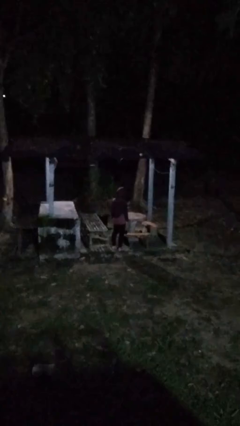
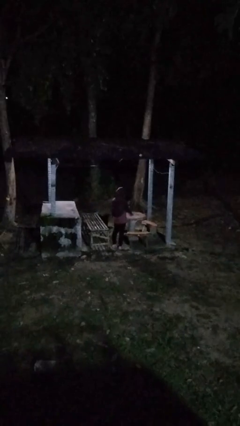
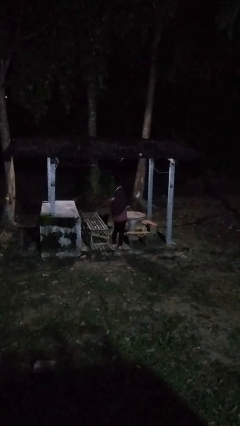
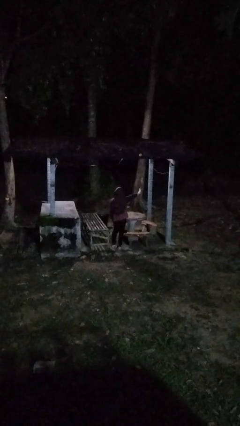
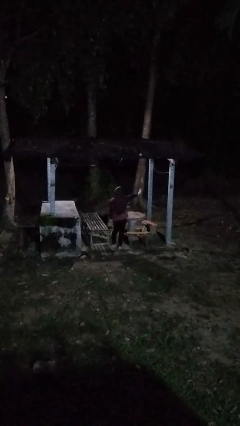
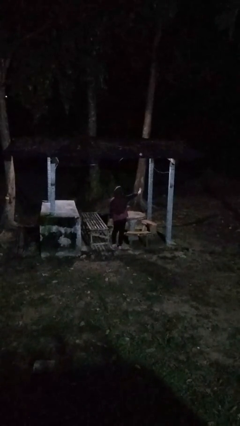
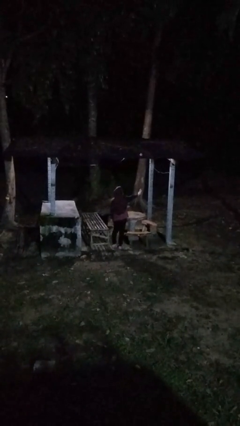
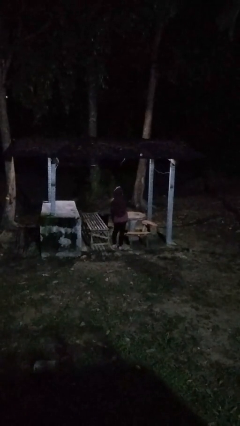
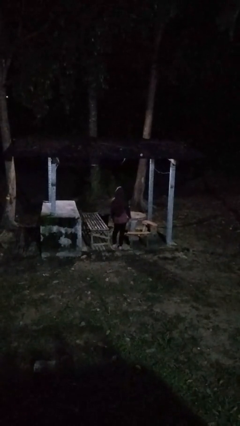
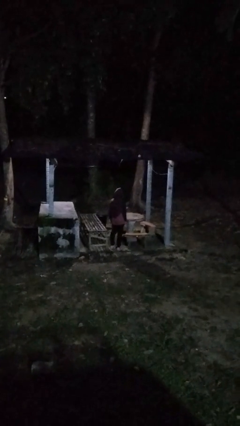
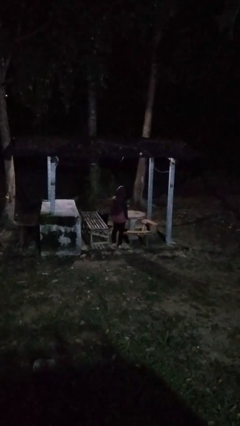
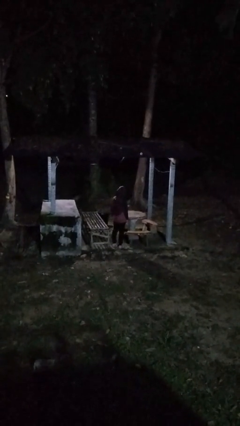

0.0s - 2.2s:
person gestures stop

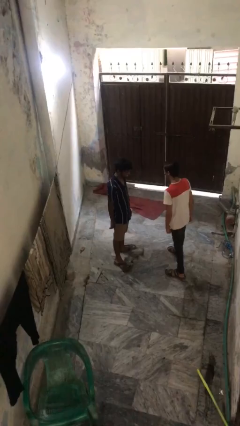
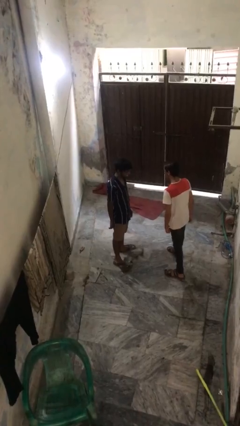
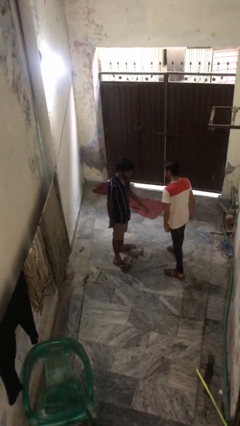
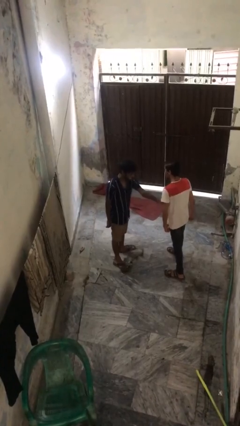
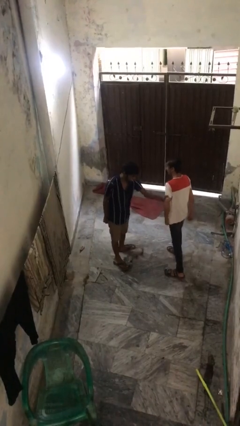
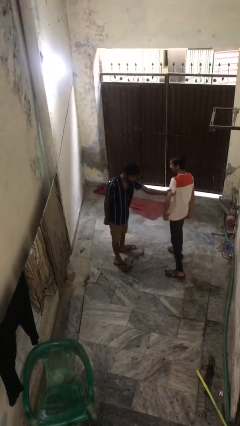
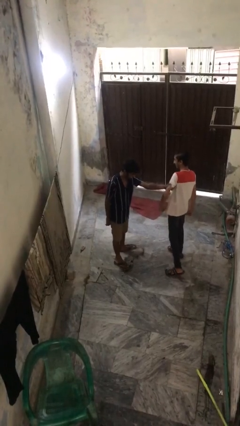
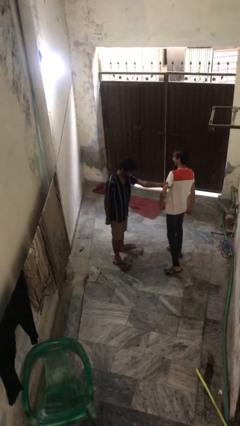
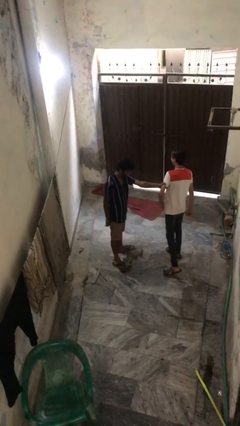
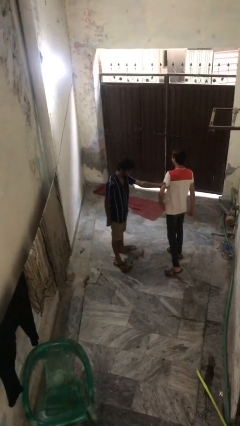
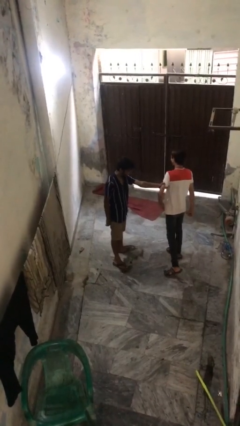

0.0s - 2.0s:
person grabs person by bicep

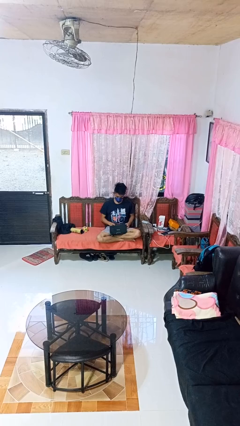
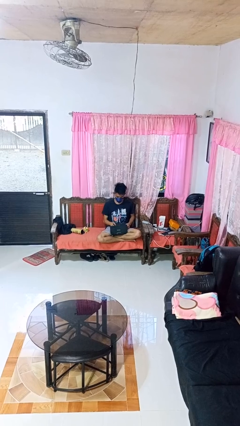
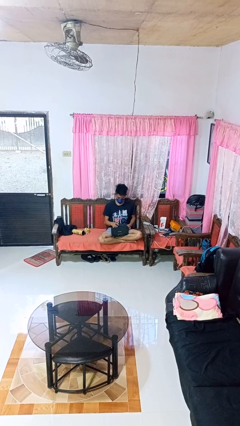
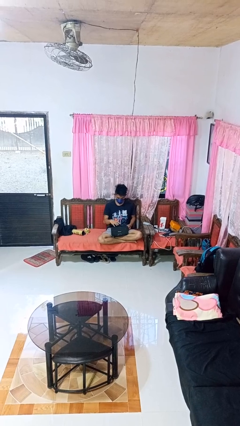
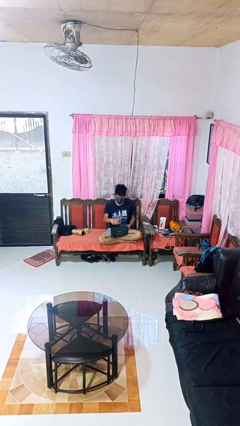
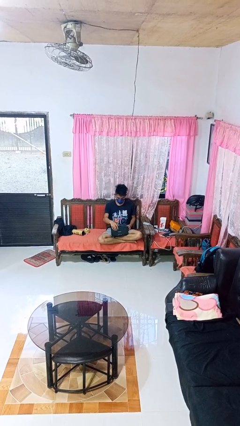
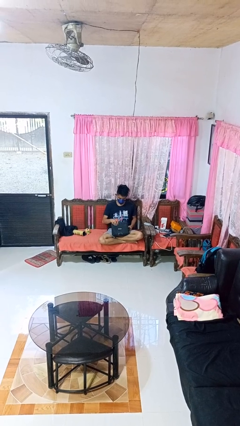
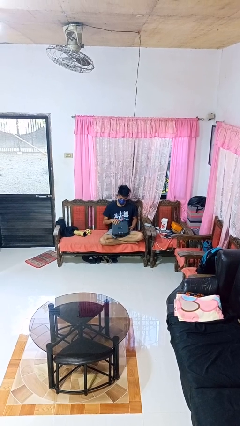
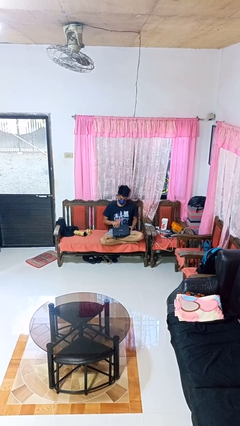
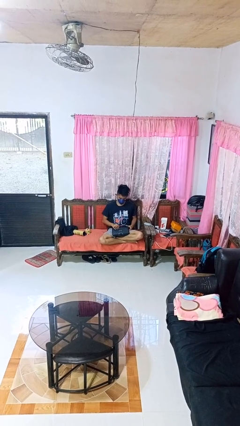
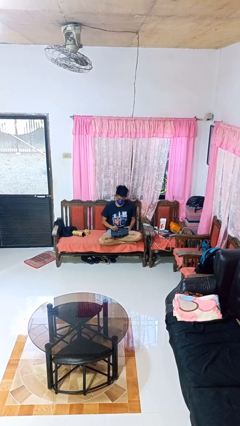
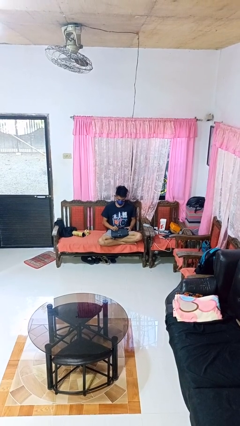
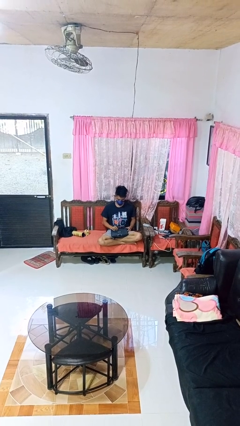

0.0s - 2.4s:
person closes laptop

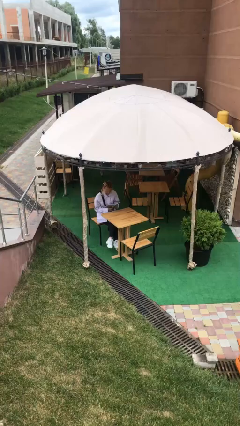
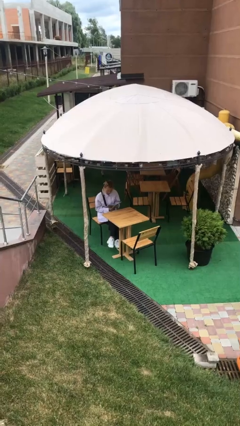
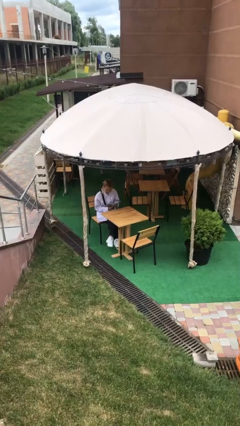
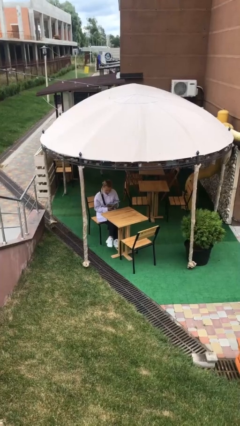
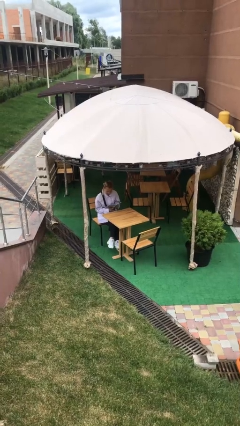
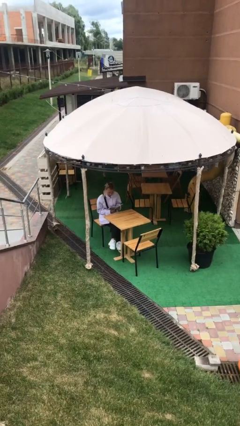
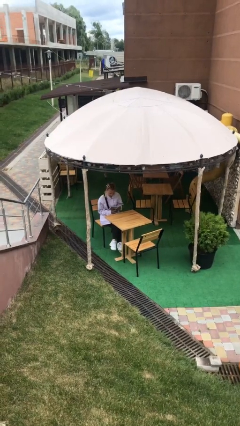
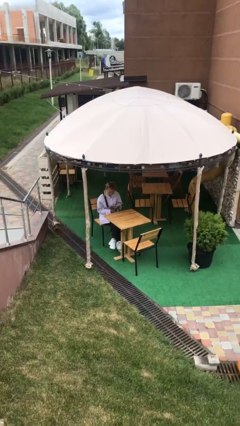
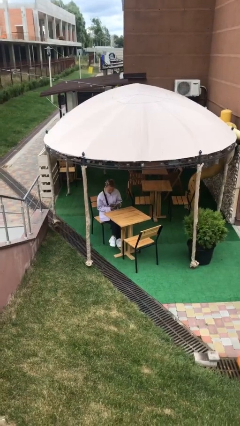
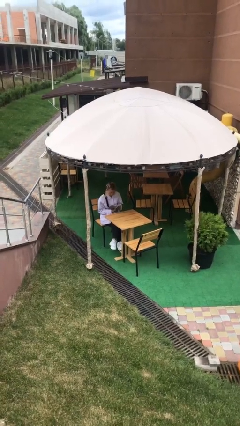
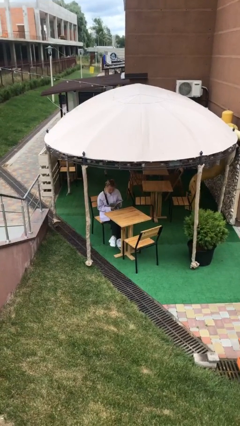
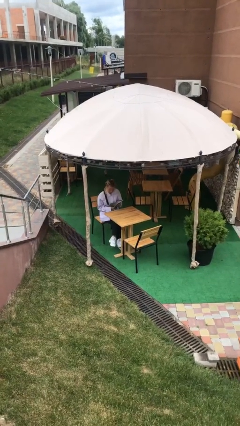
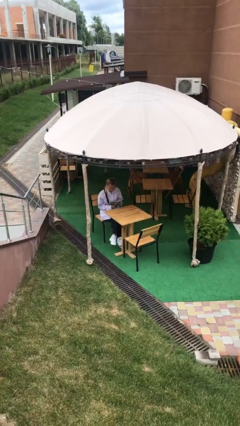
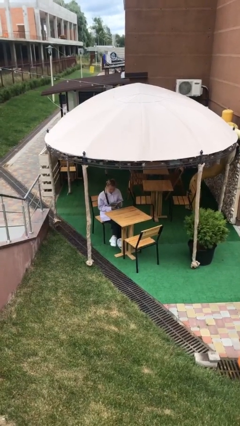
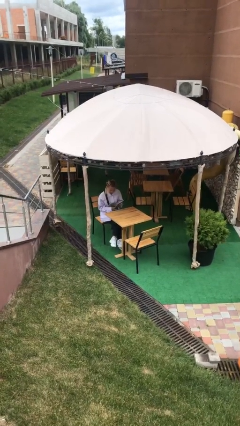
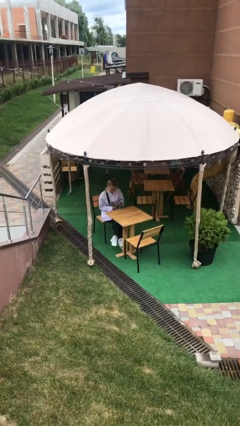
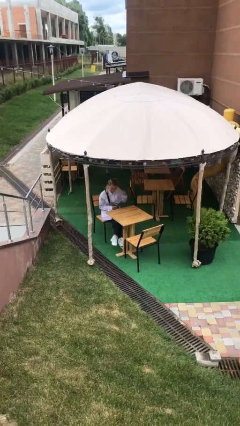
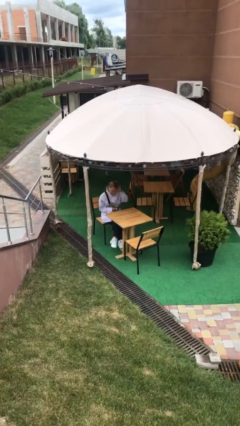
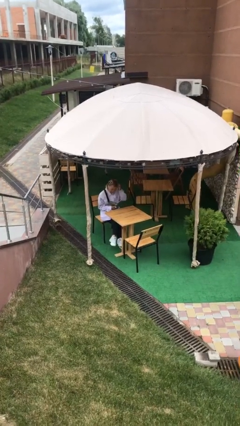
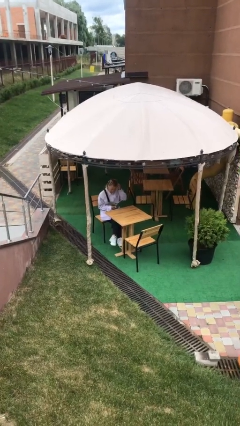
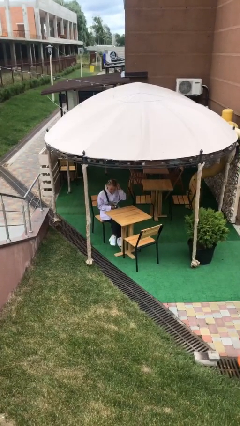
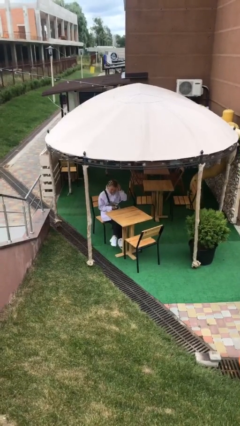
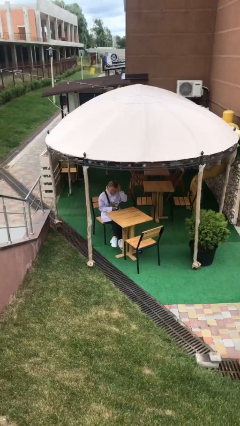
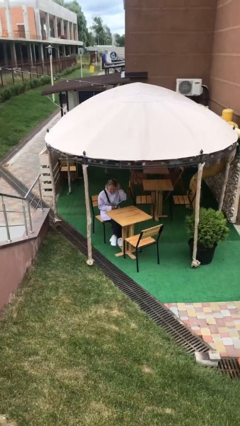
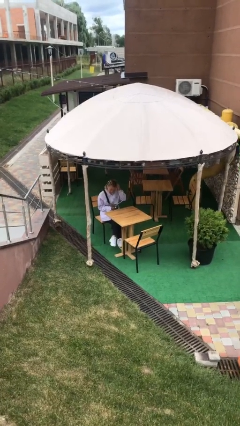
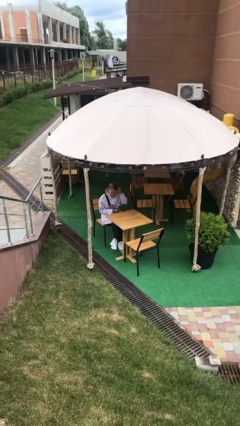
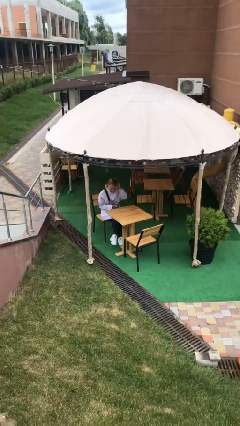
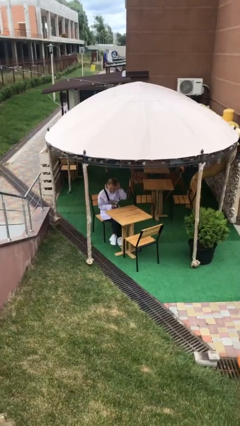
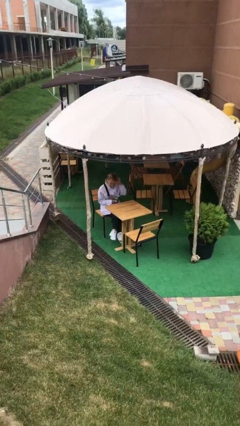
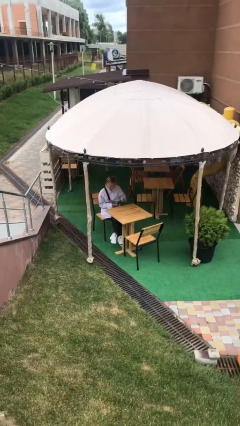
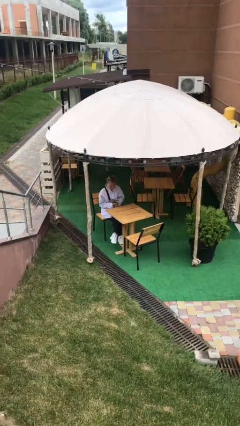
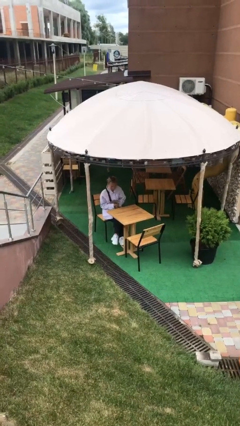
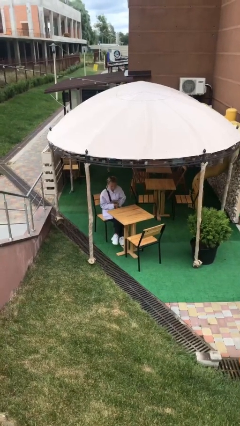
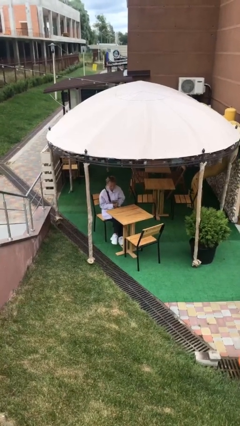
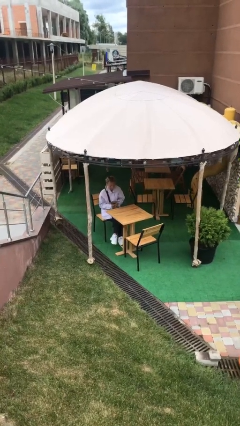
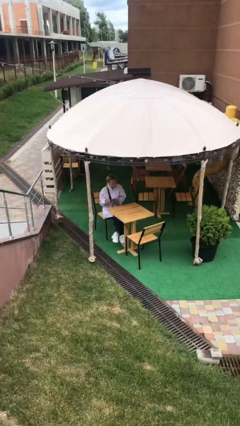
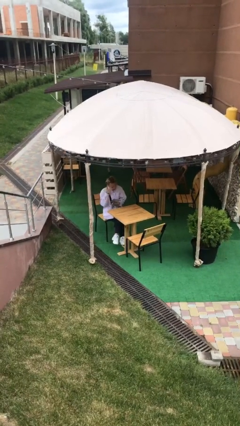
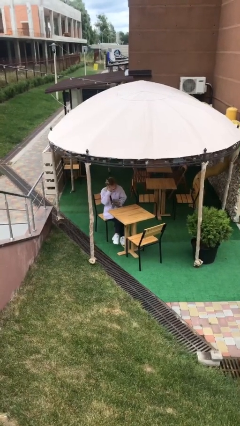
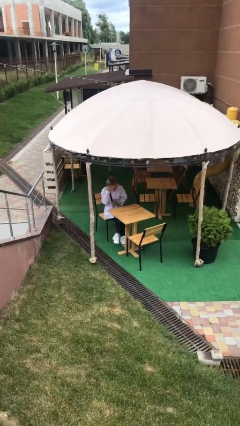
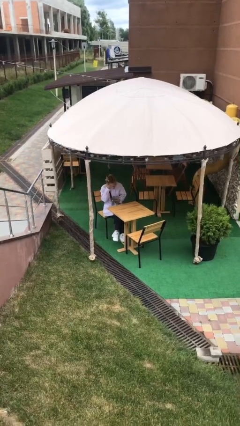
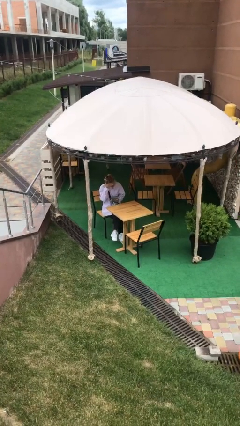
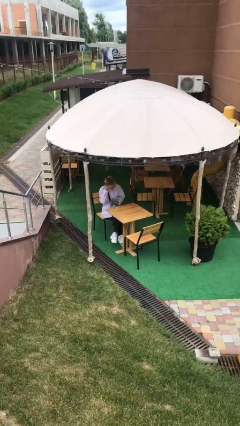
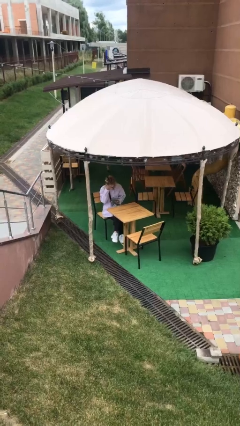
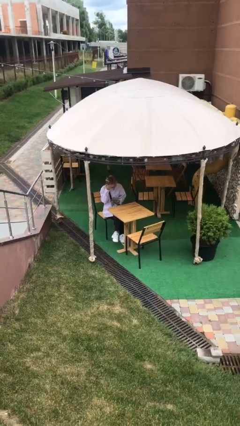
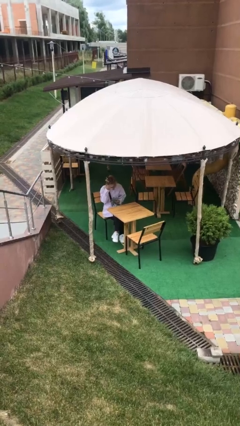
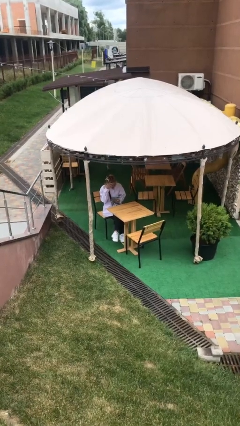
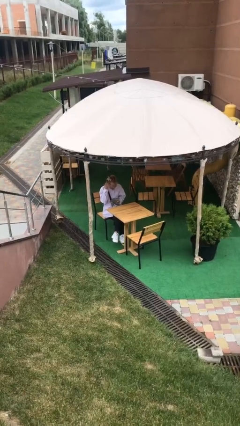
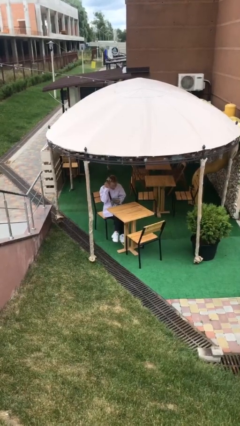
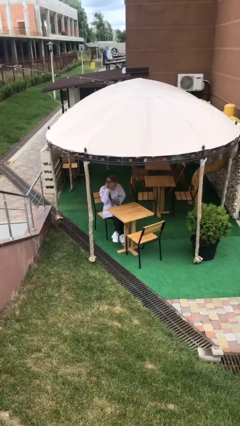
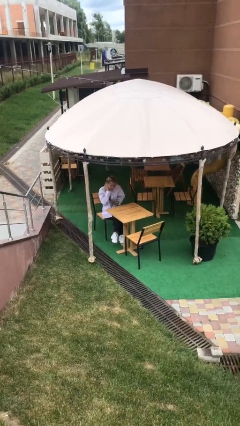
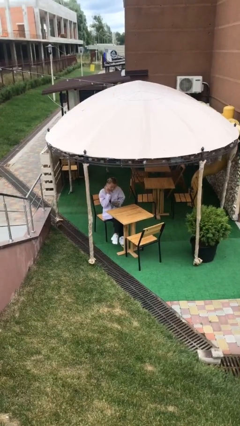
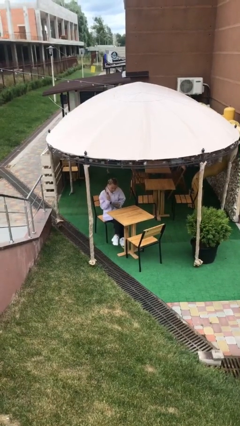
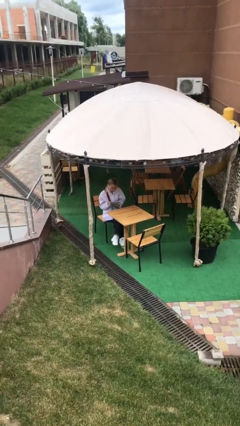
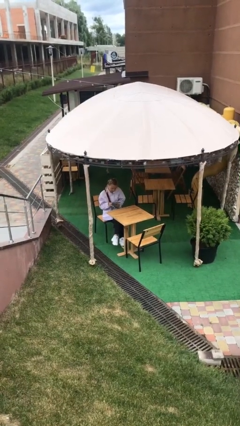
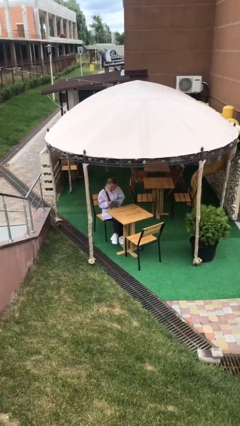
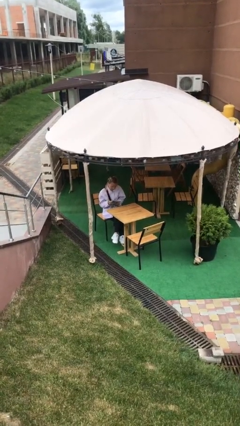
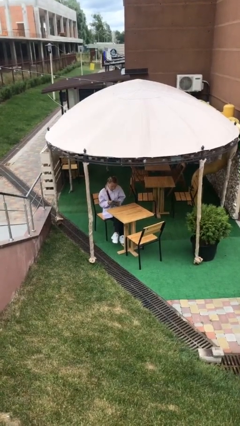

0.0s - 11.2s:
person reads document
